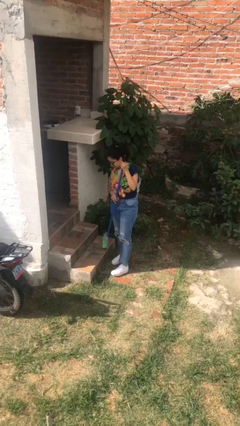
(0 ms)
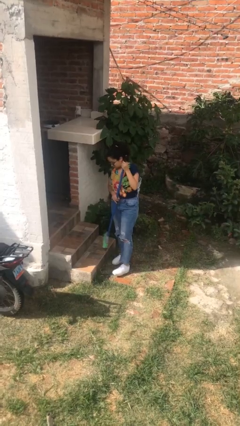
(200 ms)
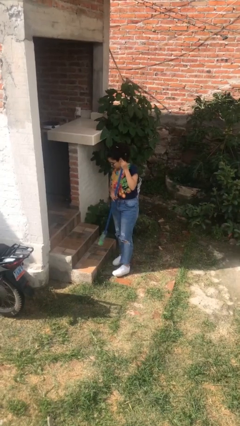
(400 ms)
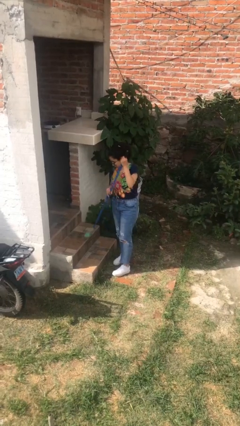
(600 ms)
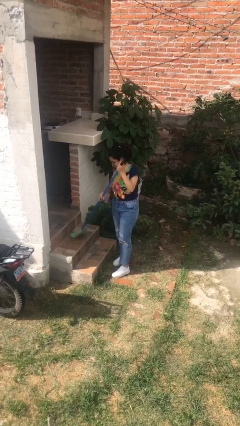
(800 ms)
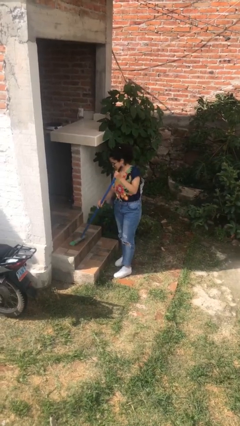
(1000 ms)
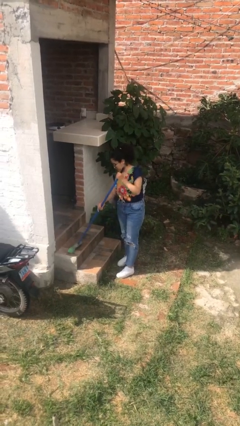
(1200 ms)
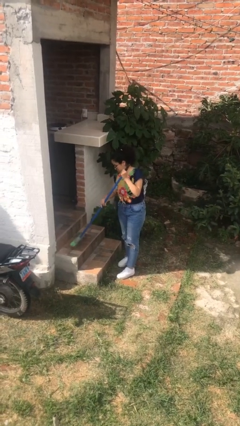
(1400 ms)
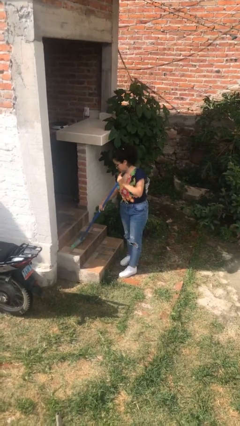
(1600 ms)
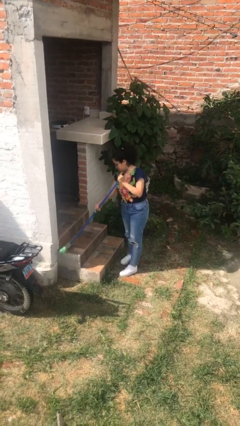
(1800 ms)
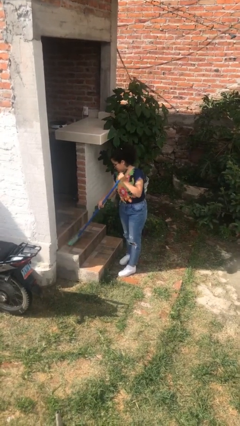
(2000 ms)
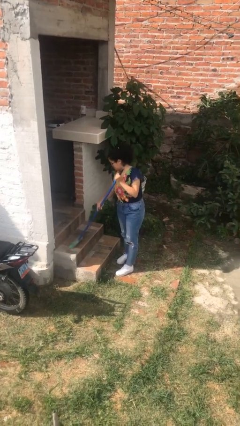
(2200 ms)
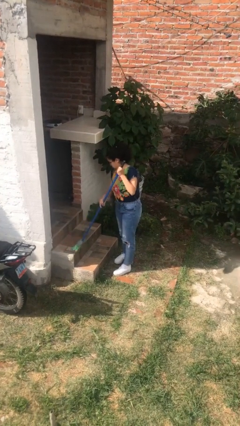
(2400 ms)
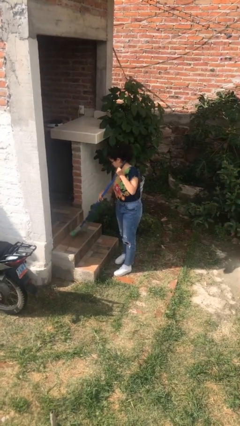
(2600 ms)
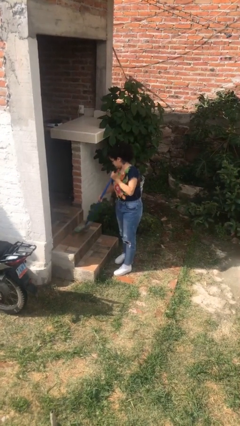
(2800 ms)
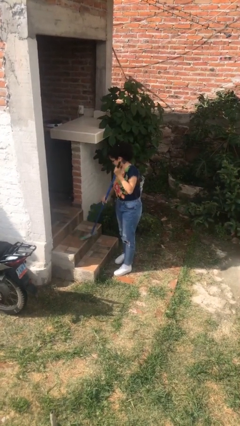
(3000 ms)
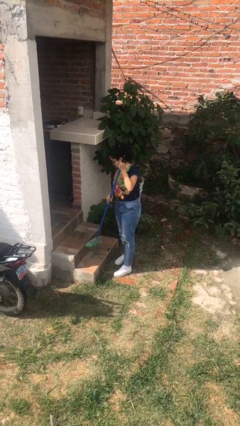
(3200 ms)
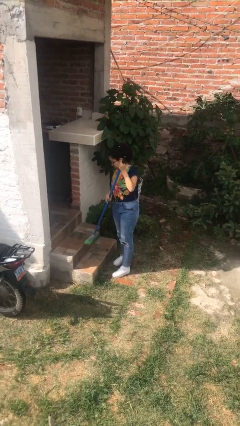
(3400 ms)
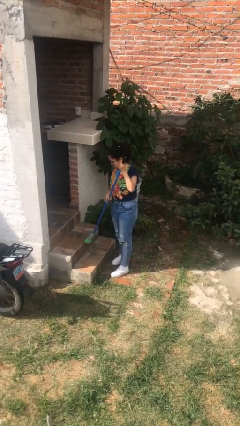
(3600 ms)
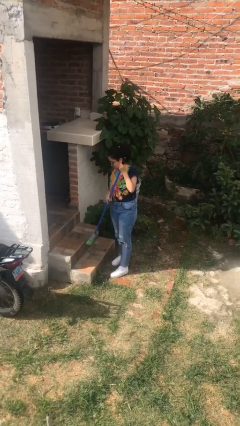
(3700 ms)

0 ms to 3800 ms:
person sweeps floor

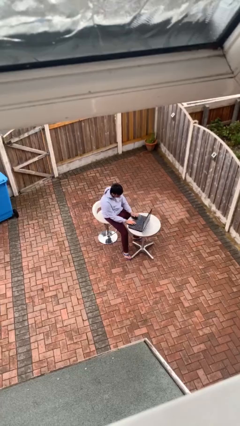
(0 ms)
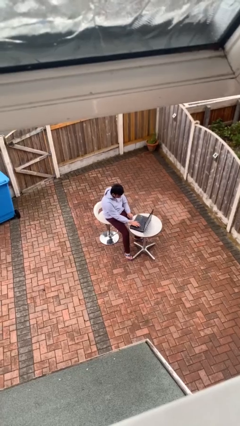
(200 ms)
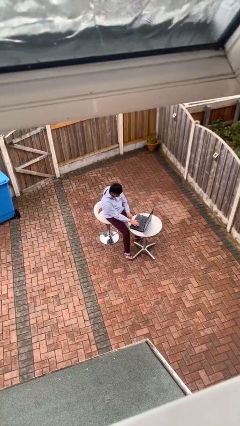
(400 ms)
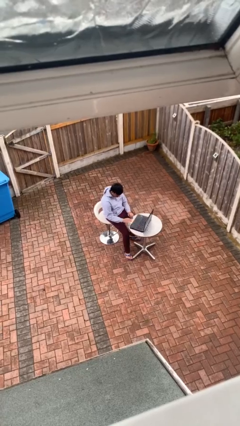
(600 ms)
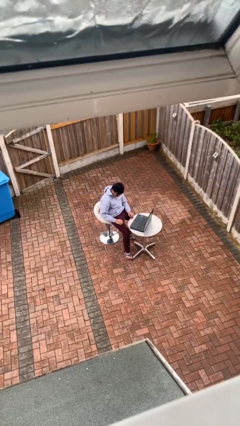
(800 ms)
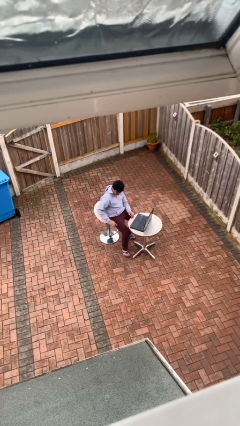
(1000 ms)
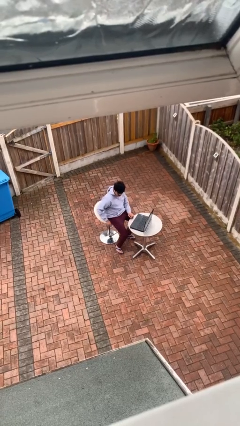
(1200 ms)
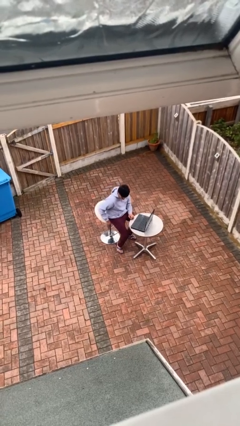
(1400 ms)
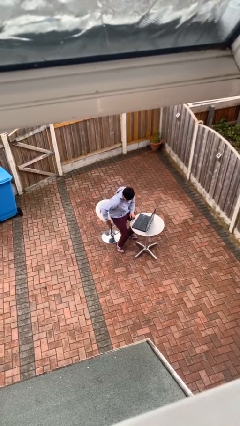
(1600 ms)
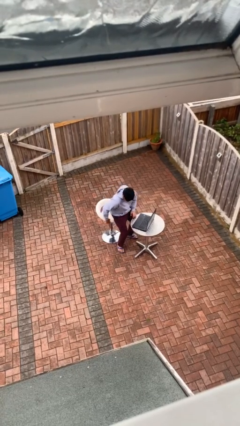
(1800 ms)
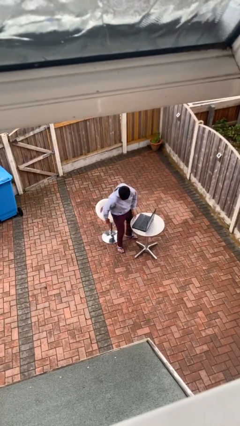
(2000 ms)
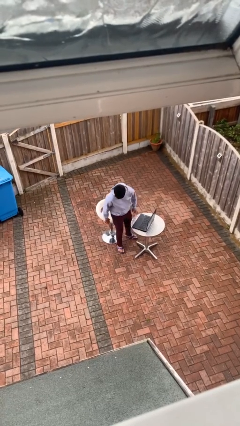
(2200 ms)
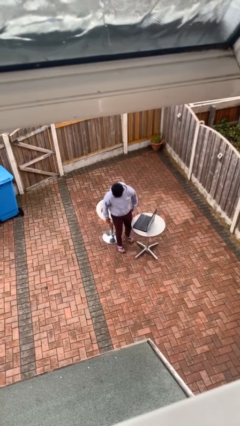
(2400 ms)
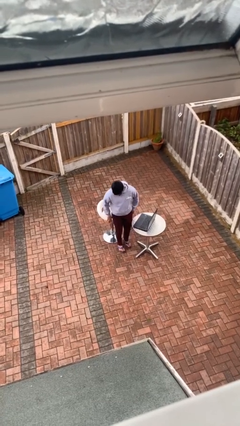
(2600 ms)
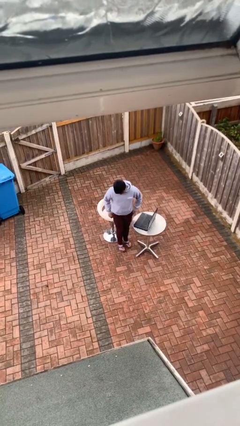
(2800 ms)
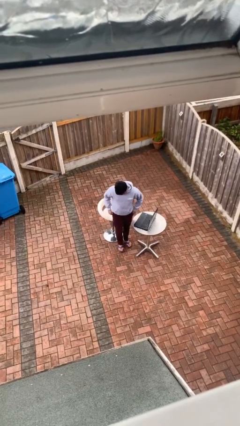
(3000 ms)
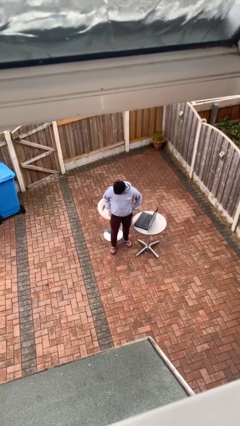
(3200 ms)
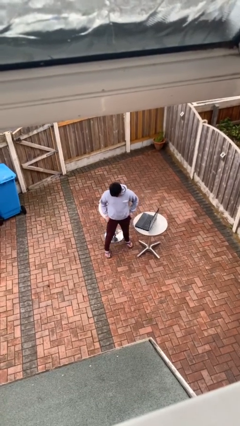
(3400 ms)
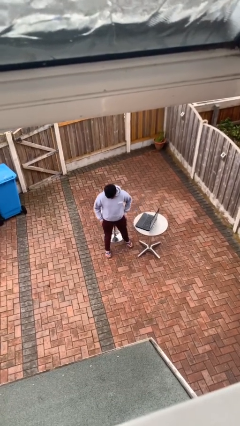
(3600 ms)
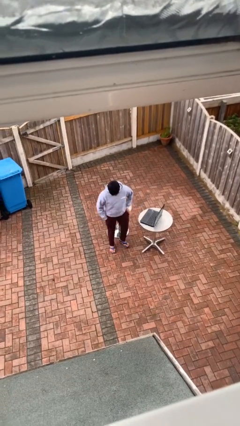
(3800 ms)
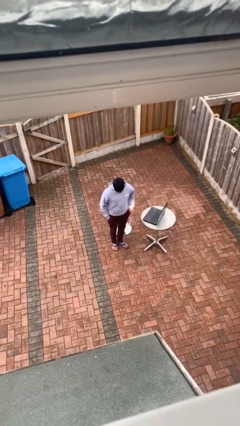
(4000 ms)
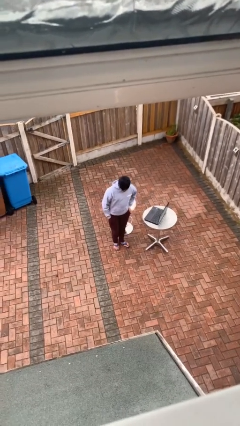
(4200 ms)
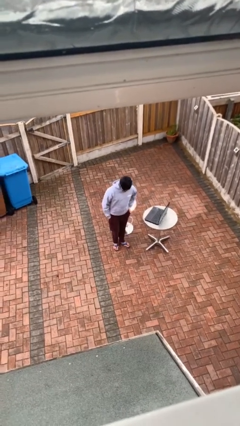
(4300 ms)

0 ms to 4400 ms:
person stands up

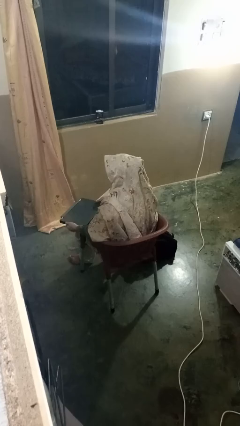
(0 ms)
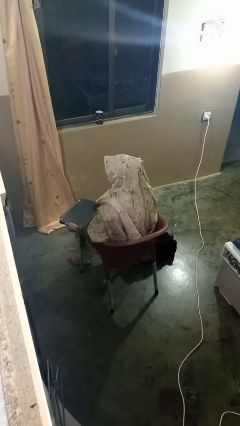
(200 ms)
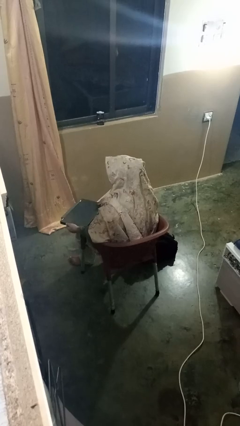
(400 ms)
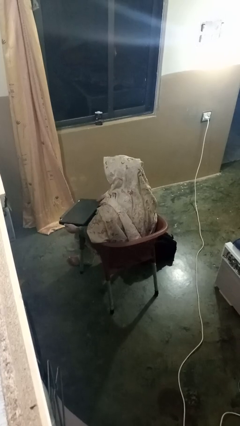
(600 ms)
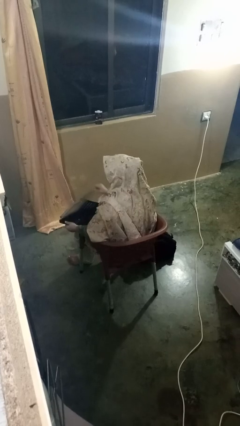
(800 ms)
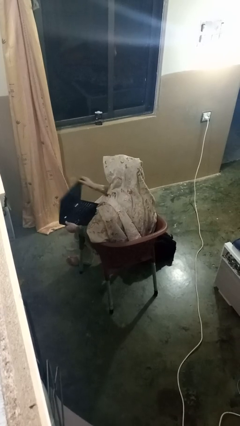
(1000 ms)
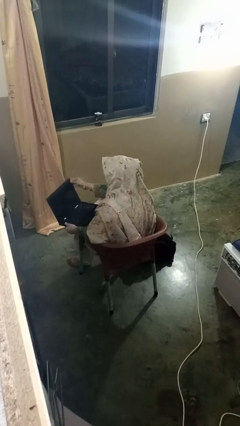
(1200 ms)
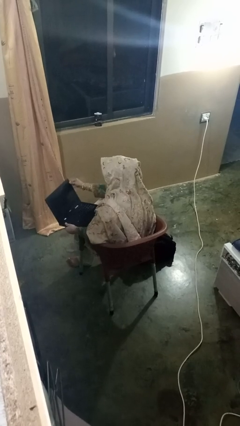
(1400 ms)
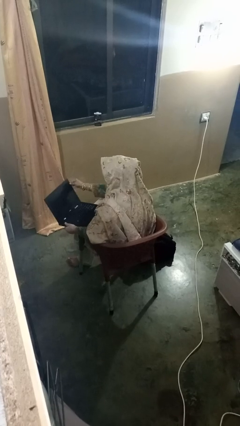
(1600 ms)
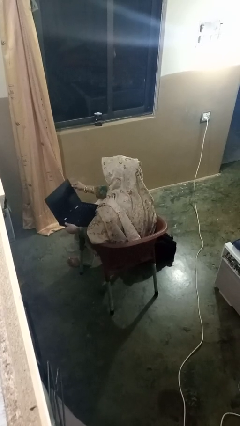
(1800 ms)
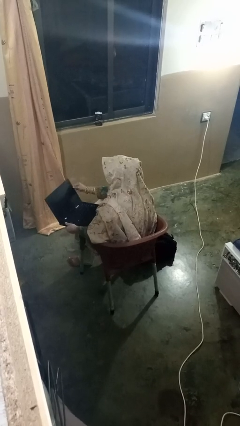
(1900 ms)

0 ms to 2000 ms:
person opens laptop

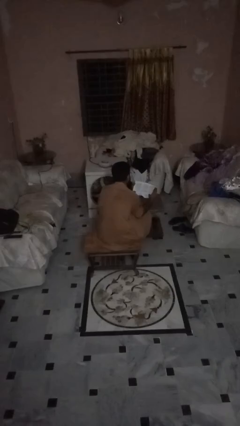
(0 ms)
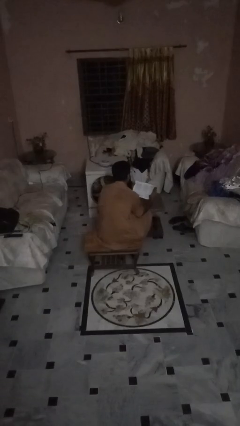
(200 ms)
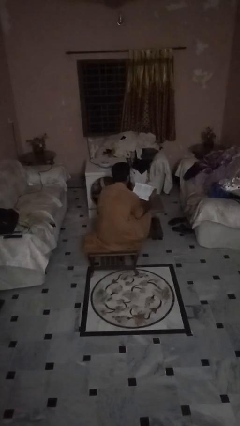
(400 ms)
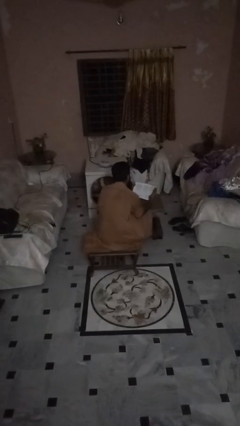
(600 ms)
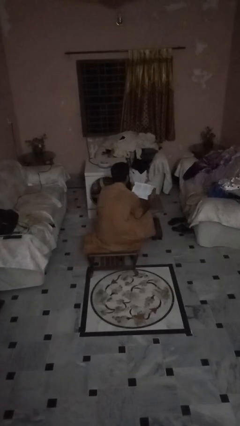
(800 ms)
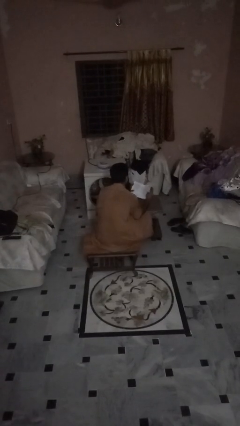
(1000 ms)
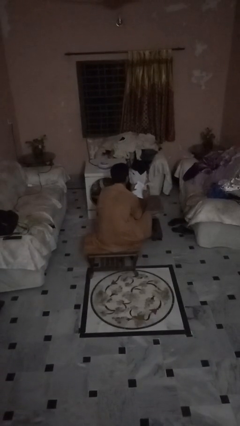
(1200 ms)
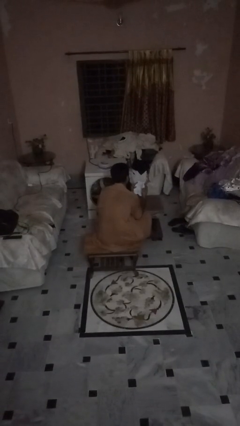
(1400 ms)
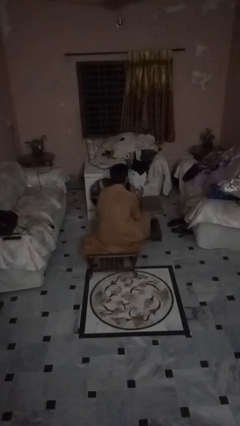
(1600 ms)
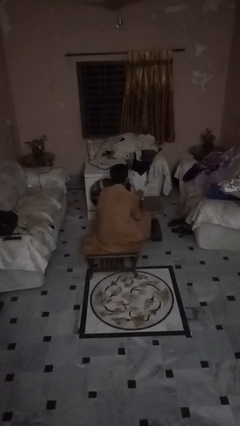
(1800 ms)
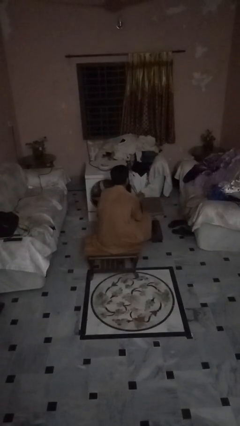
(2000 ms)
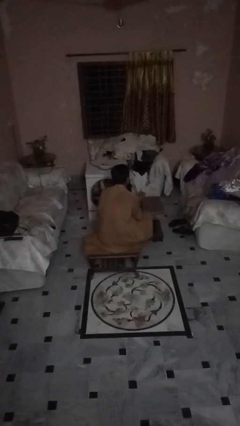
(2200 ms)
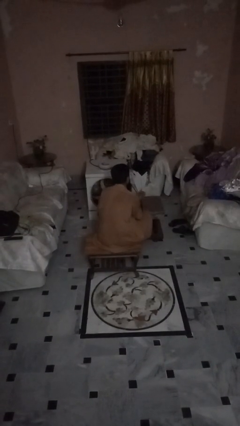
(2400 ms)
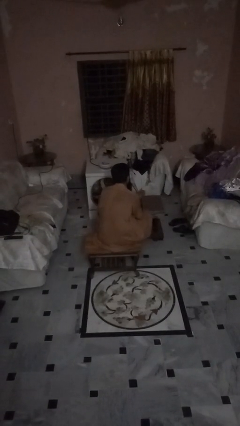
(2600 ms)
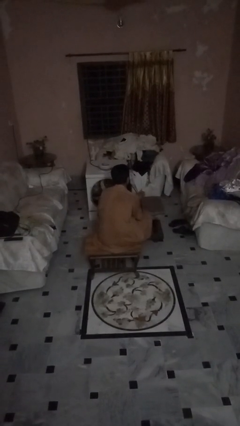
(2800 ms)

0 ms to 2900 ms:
person crumples paper

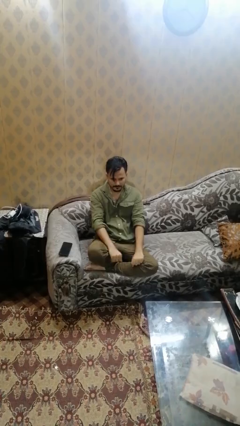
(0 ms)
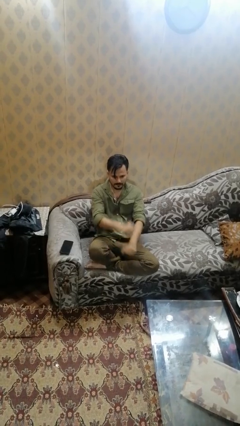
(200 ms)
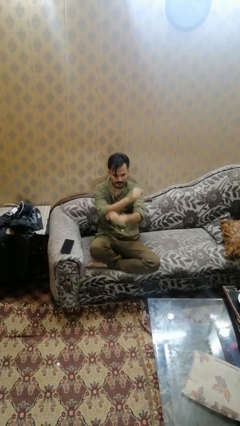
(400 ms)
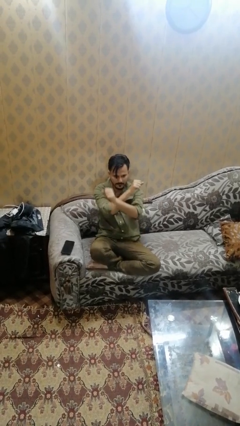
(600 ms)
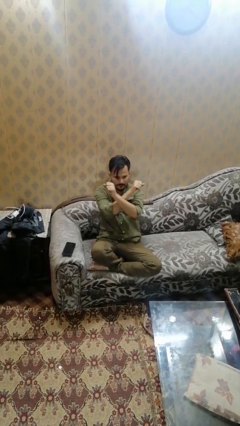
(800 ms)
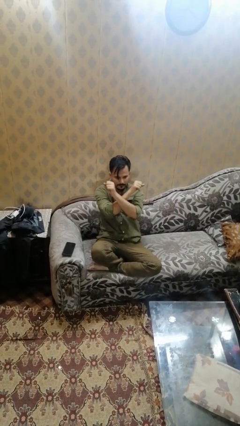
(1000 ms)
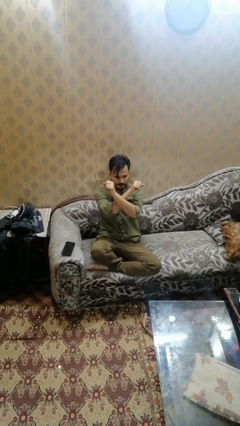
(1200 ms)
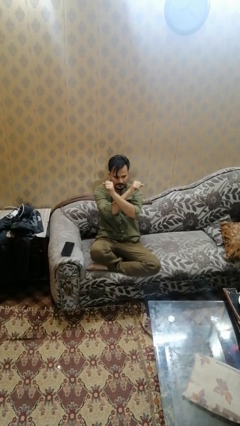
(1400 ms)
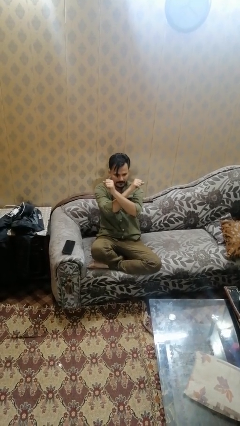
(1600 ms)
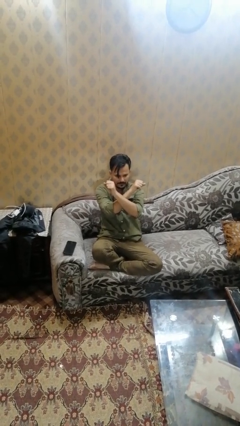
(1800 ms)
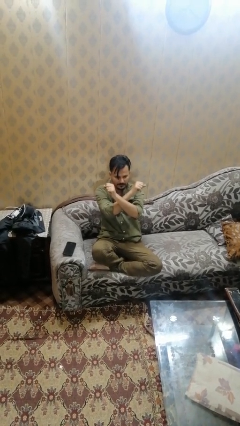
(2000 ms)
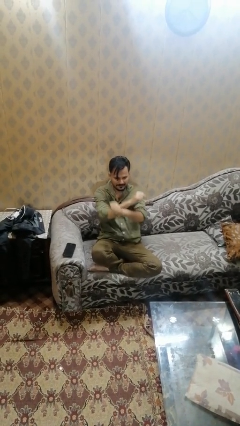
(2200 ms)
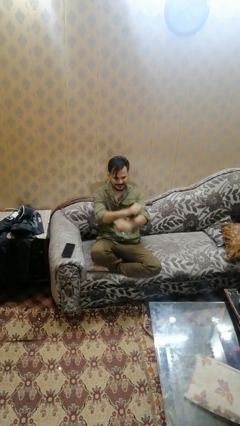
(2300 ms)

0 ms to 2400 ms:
person gestures arms x

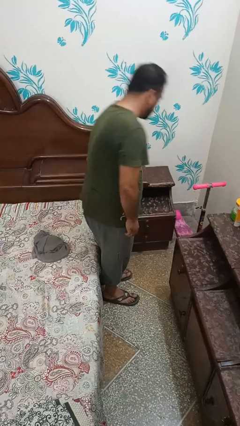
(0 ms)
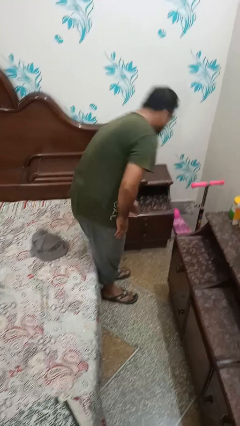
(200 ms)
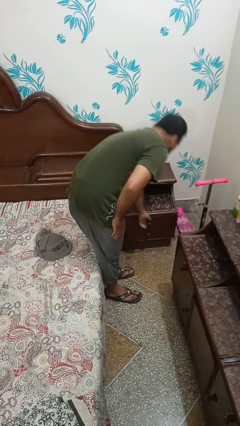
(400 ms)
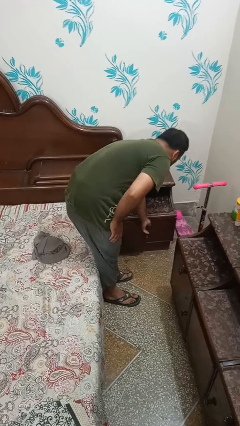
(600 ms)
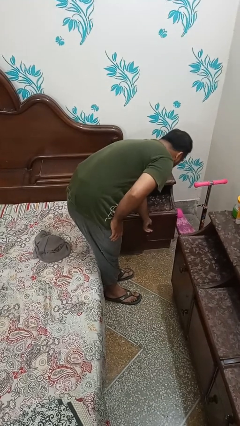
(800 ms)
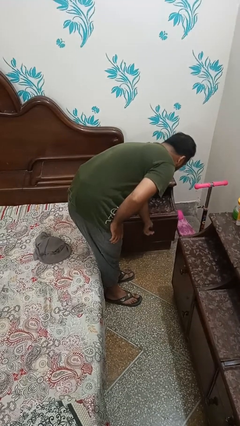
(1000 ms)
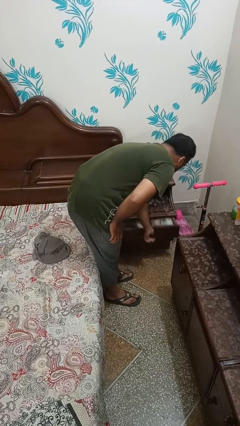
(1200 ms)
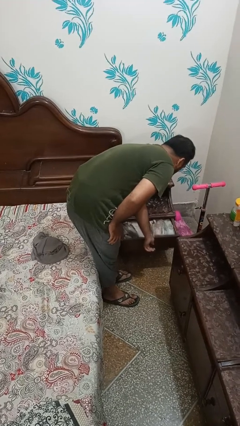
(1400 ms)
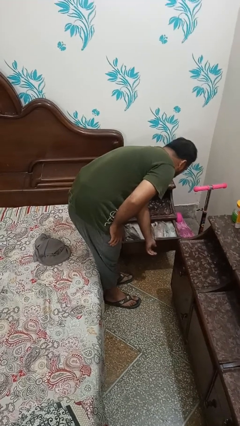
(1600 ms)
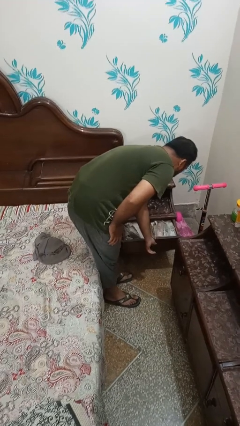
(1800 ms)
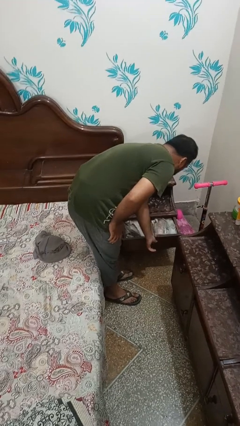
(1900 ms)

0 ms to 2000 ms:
person opens dresser drawer

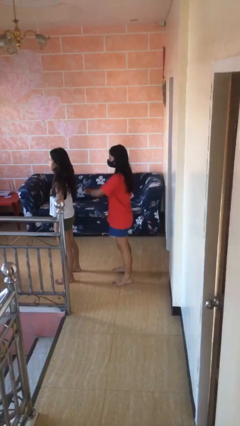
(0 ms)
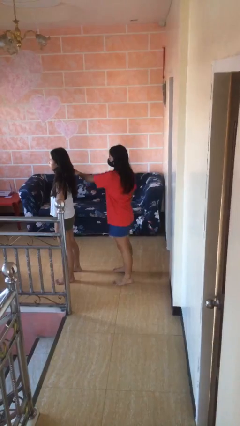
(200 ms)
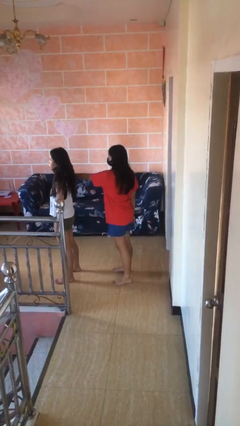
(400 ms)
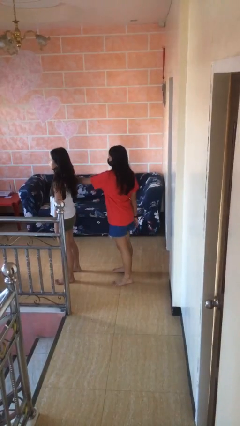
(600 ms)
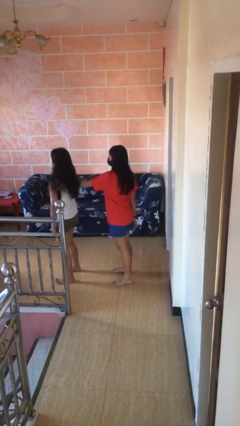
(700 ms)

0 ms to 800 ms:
person grabs person by shoulder
